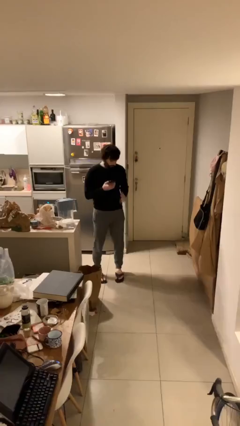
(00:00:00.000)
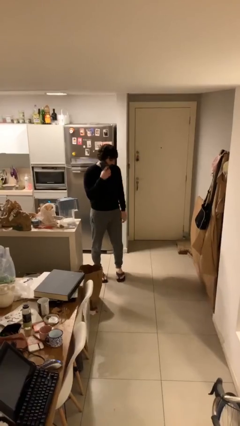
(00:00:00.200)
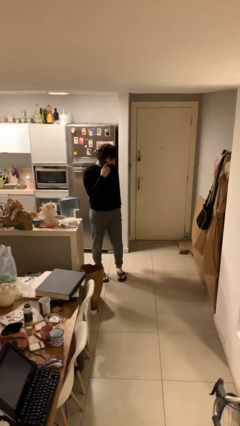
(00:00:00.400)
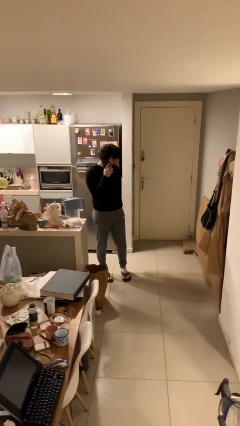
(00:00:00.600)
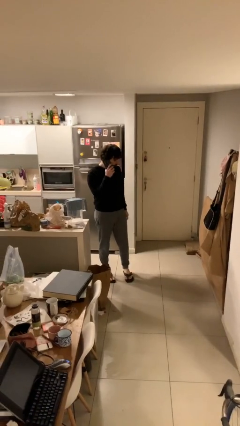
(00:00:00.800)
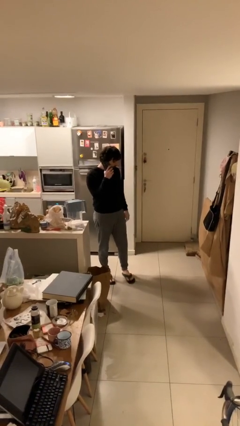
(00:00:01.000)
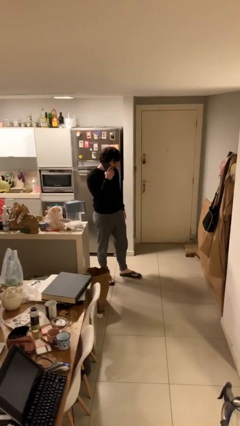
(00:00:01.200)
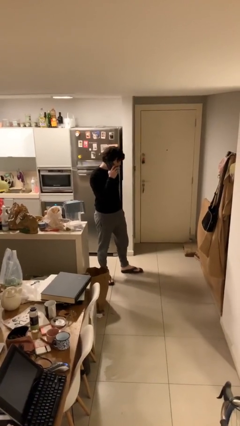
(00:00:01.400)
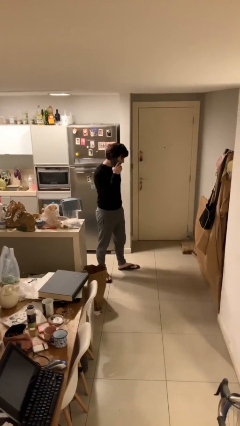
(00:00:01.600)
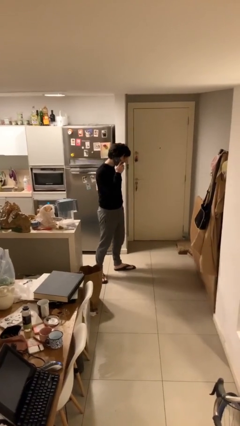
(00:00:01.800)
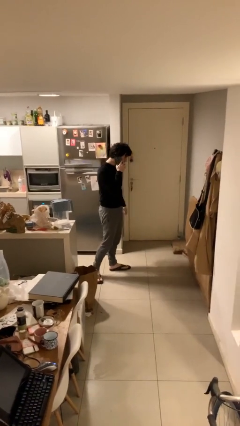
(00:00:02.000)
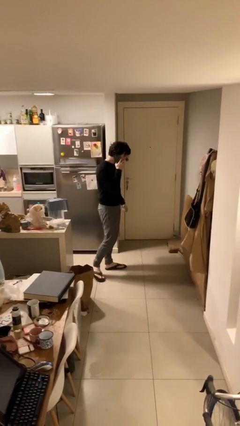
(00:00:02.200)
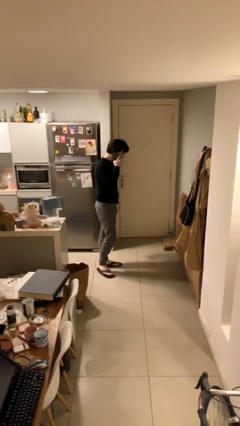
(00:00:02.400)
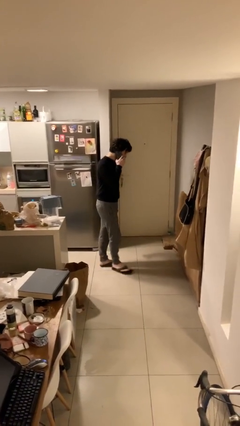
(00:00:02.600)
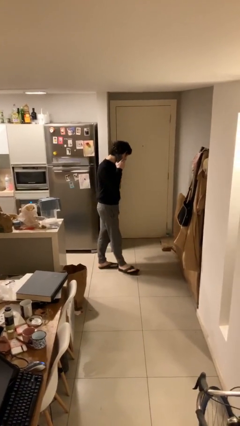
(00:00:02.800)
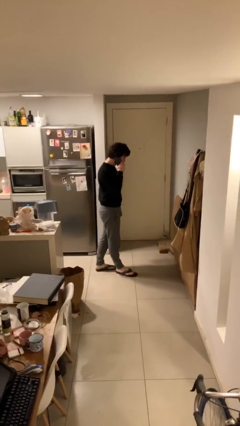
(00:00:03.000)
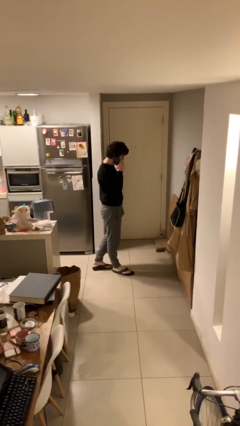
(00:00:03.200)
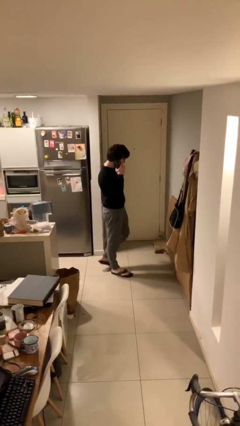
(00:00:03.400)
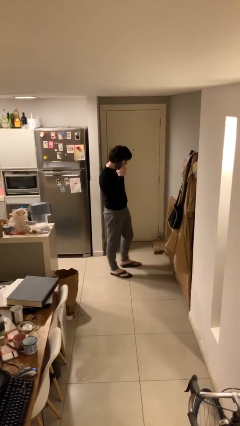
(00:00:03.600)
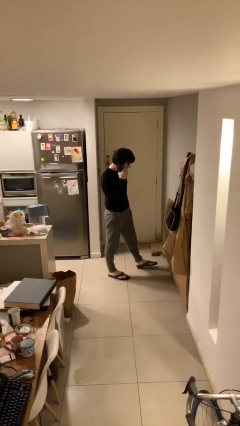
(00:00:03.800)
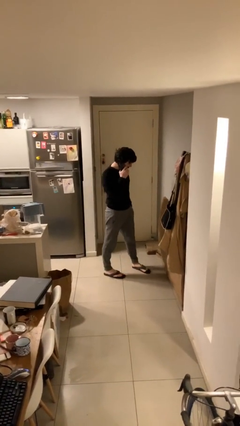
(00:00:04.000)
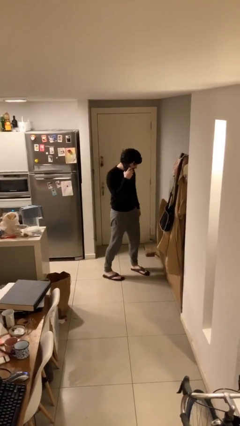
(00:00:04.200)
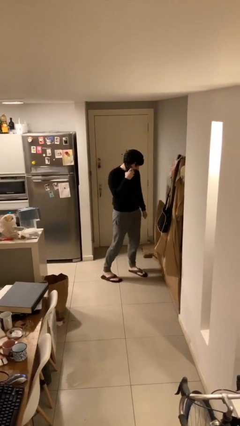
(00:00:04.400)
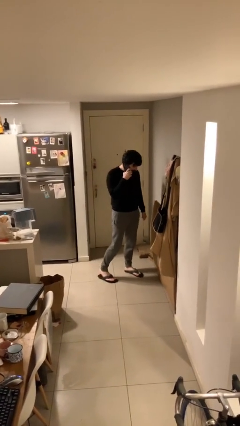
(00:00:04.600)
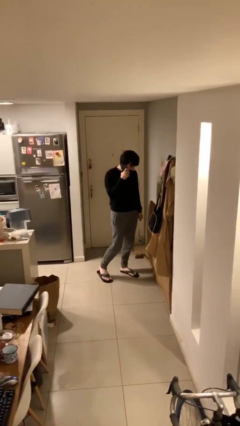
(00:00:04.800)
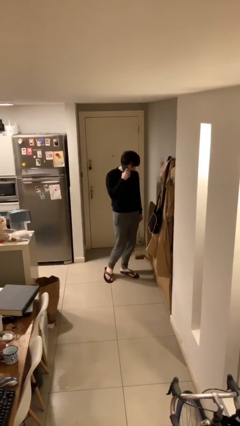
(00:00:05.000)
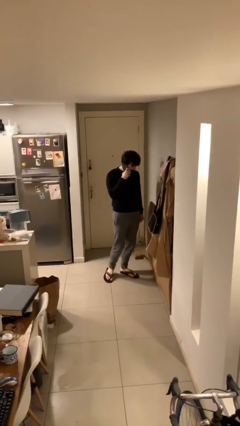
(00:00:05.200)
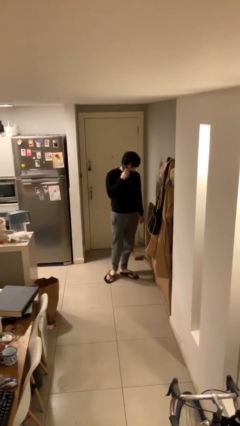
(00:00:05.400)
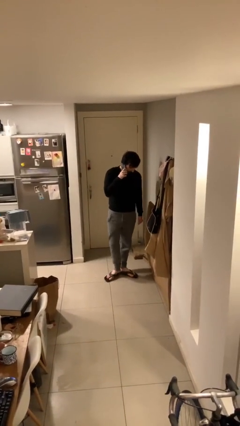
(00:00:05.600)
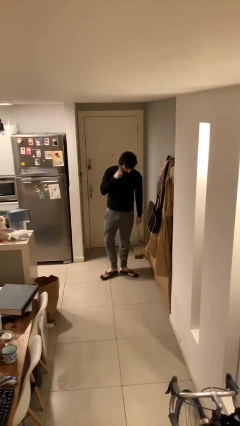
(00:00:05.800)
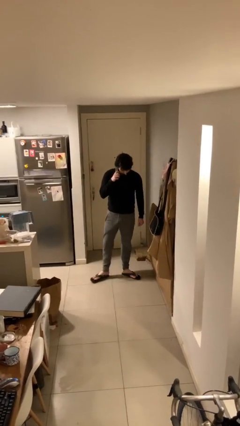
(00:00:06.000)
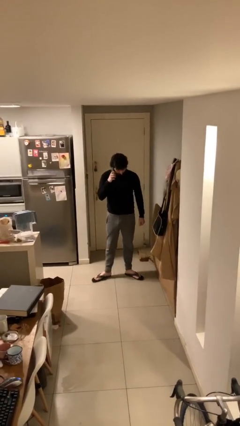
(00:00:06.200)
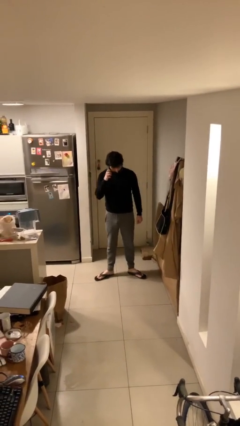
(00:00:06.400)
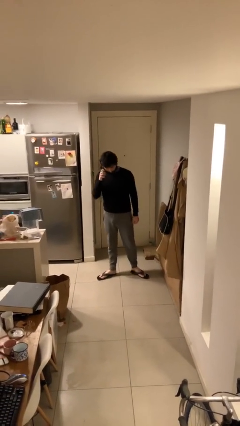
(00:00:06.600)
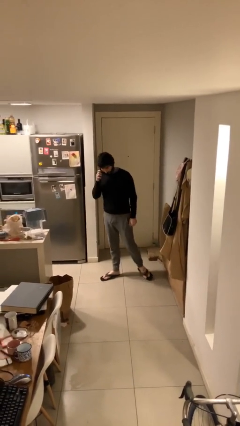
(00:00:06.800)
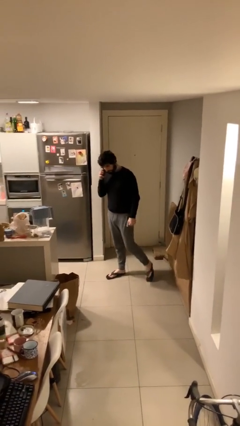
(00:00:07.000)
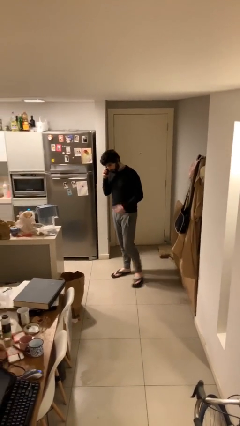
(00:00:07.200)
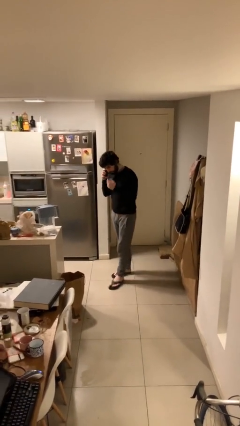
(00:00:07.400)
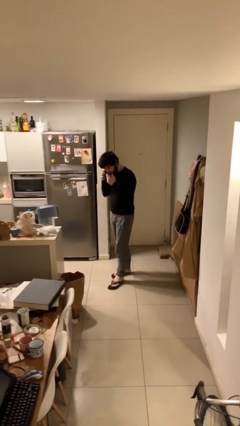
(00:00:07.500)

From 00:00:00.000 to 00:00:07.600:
person talks on phone

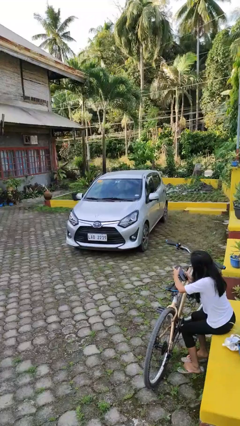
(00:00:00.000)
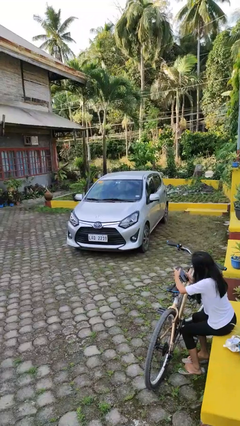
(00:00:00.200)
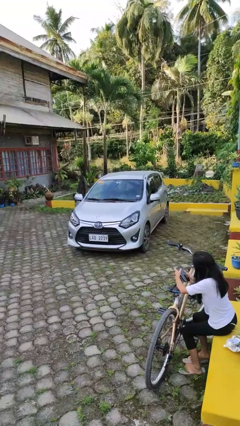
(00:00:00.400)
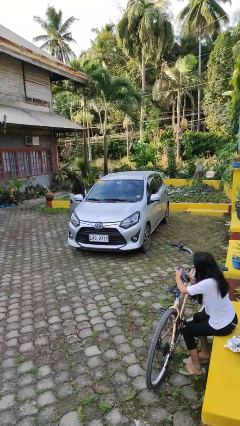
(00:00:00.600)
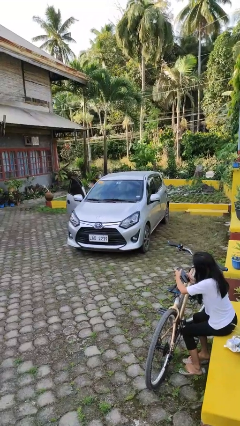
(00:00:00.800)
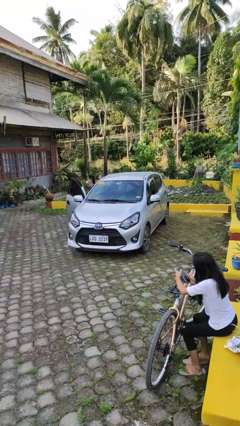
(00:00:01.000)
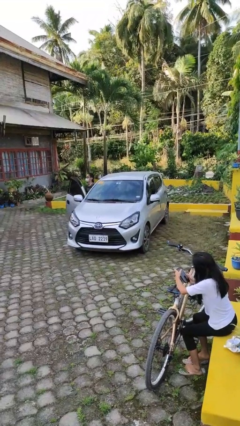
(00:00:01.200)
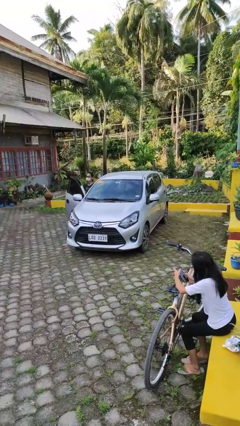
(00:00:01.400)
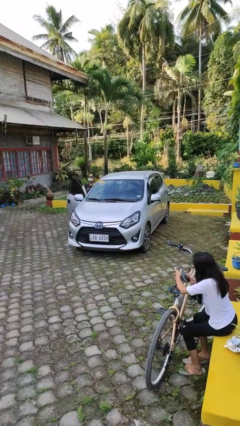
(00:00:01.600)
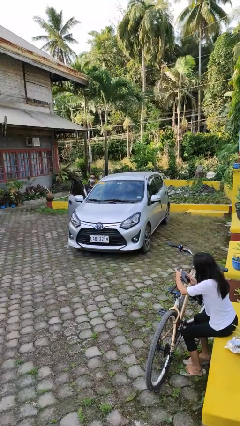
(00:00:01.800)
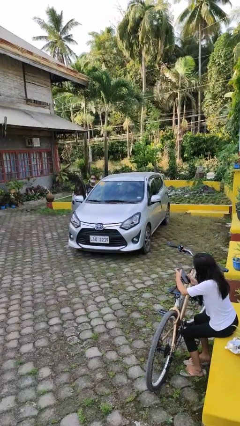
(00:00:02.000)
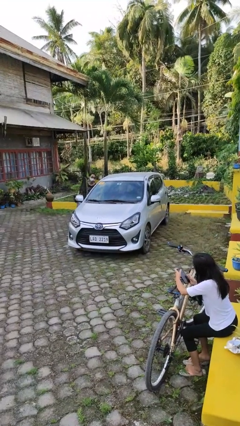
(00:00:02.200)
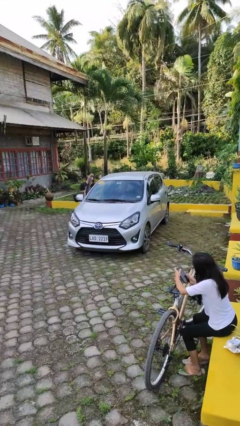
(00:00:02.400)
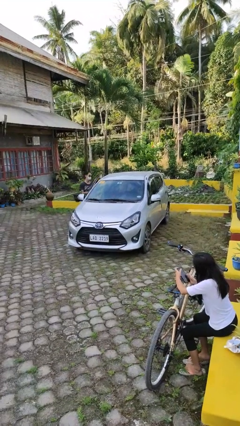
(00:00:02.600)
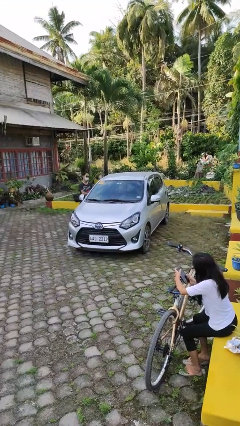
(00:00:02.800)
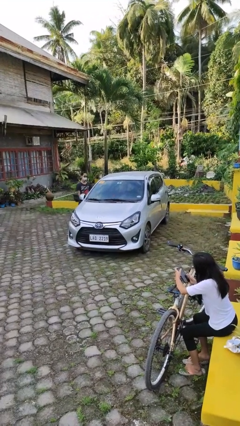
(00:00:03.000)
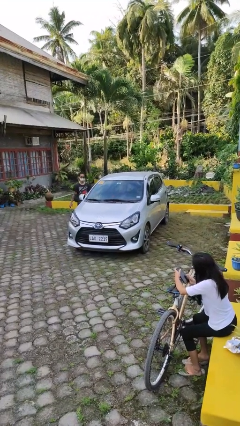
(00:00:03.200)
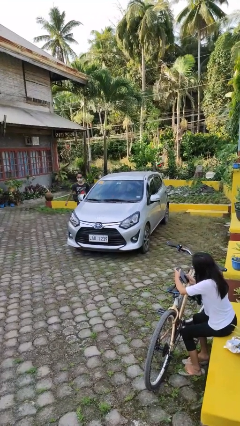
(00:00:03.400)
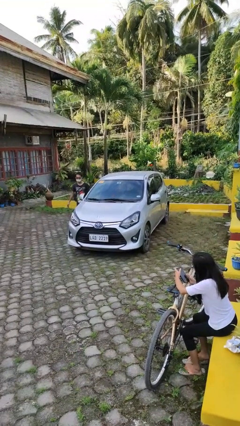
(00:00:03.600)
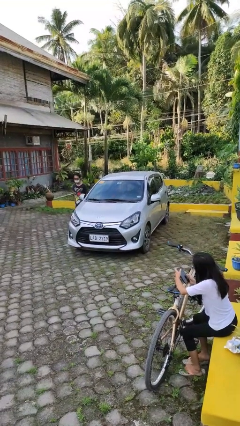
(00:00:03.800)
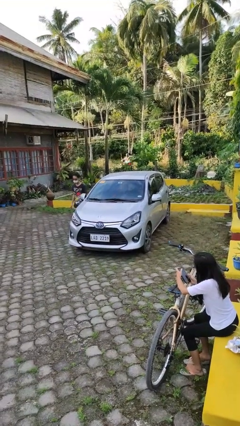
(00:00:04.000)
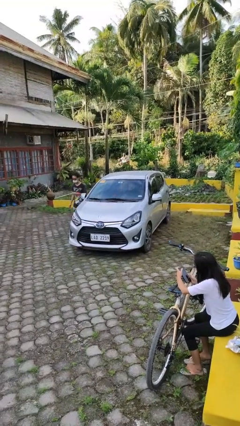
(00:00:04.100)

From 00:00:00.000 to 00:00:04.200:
car drops off person

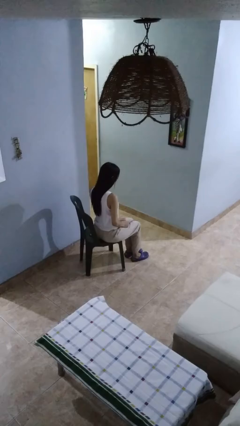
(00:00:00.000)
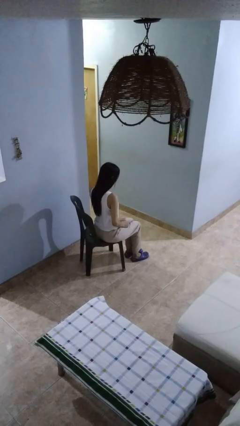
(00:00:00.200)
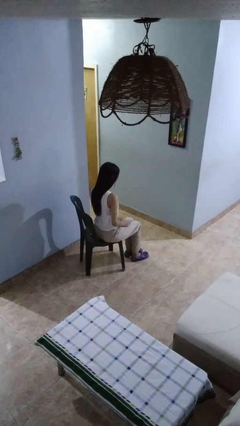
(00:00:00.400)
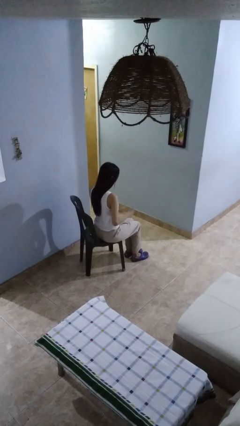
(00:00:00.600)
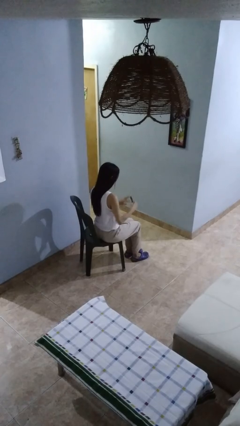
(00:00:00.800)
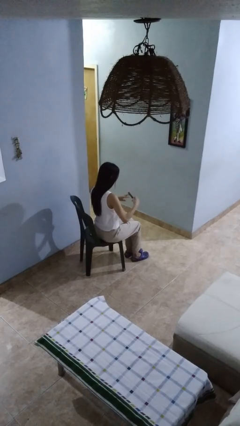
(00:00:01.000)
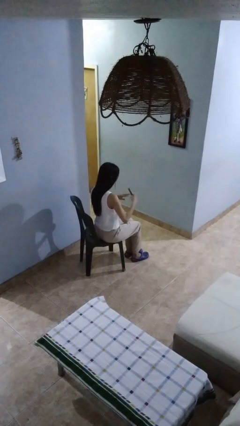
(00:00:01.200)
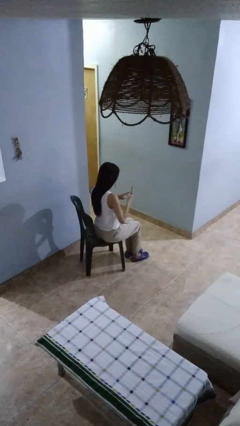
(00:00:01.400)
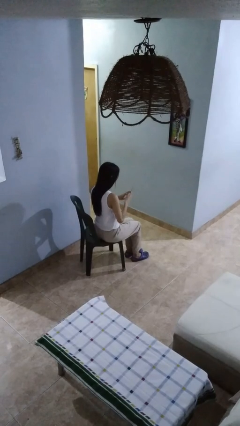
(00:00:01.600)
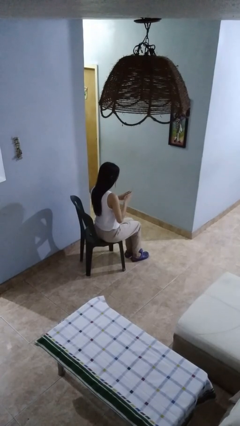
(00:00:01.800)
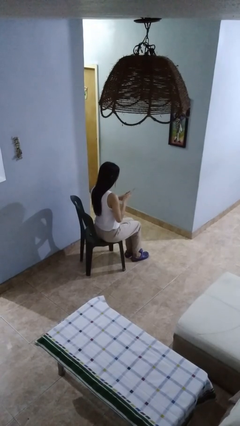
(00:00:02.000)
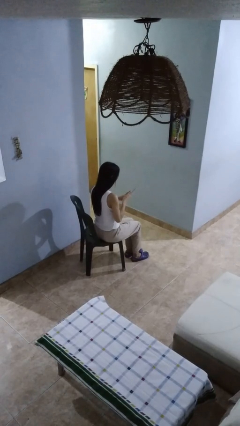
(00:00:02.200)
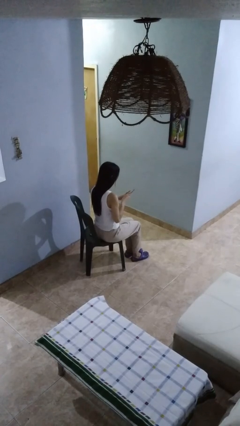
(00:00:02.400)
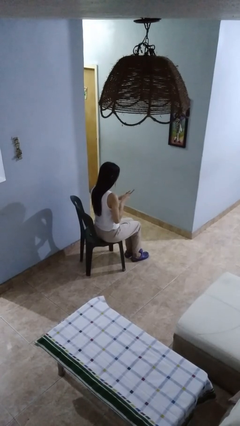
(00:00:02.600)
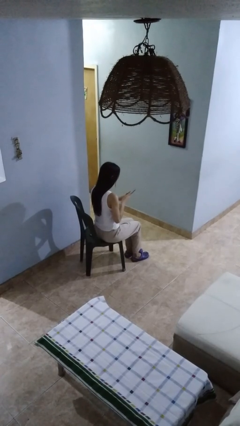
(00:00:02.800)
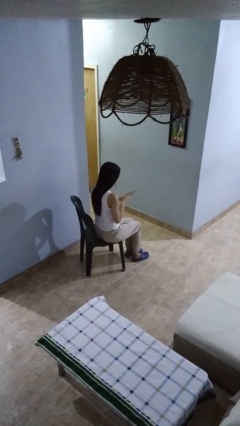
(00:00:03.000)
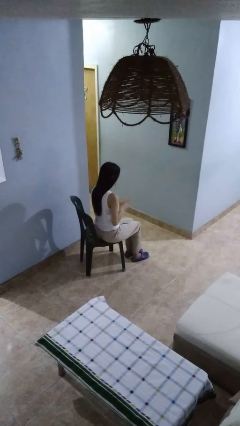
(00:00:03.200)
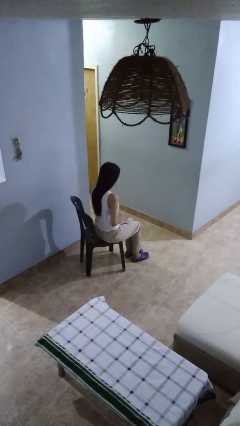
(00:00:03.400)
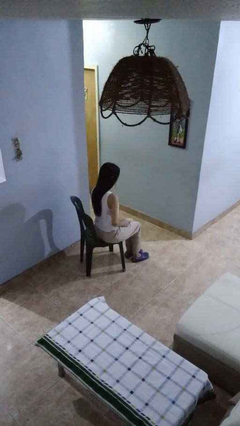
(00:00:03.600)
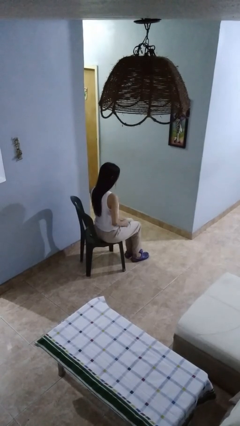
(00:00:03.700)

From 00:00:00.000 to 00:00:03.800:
person files fingernails

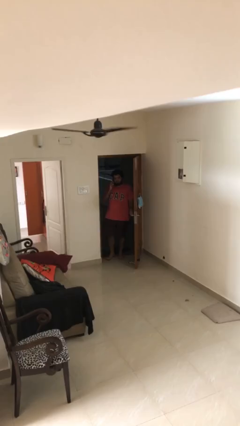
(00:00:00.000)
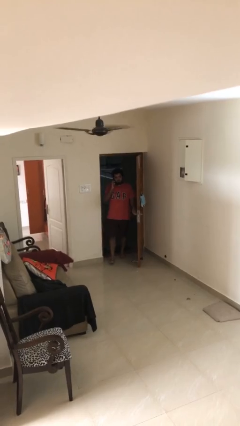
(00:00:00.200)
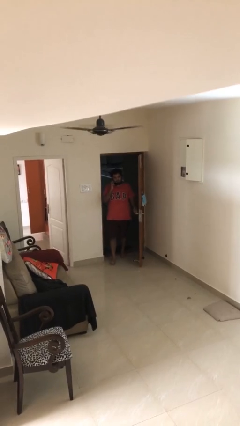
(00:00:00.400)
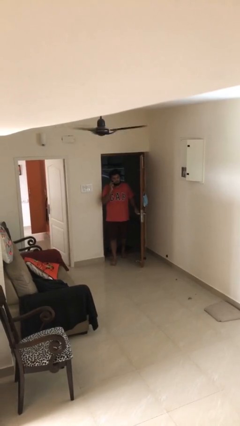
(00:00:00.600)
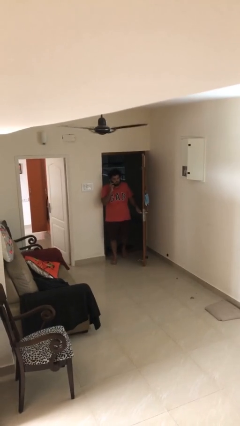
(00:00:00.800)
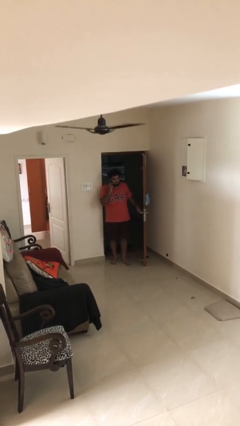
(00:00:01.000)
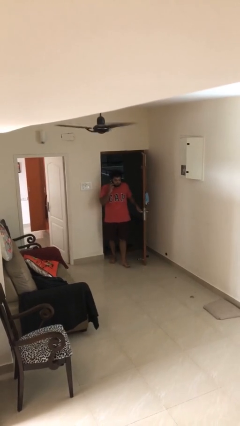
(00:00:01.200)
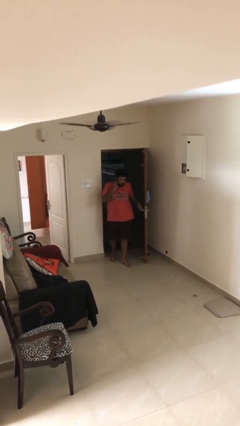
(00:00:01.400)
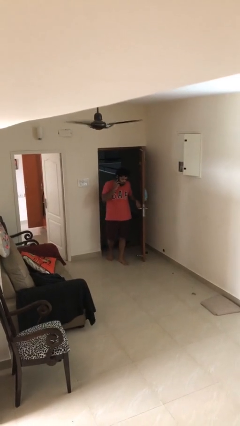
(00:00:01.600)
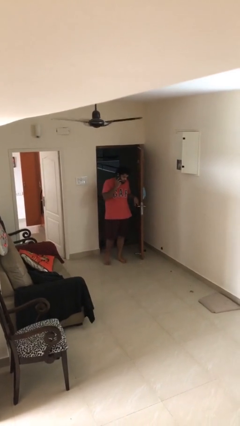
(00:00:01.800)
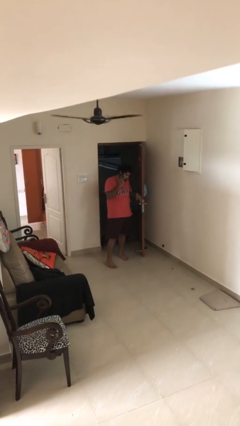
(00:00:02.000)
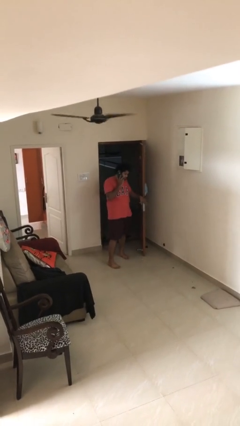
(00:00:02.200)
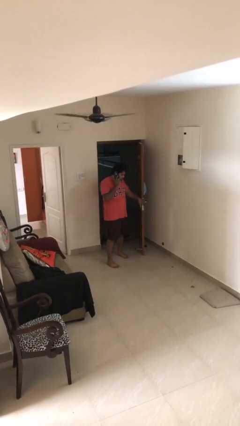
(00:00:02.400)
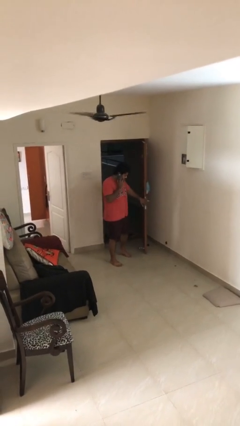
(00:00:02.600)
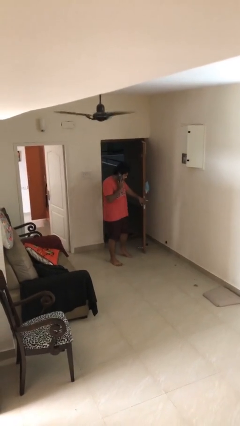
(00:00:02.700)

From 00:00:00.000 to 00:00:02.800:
person enters scene through structure
